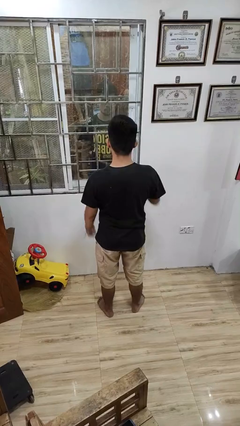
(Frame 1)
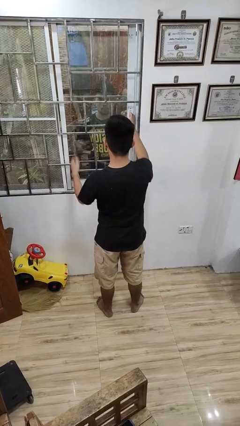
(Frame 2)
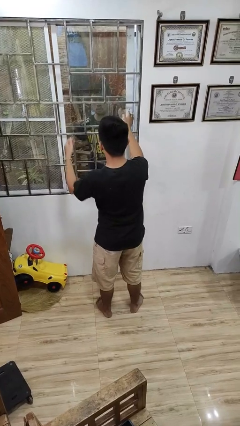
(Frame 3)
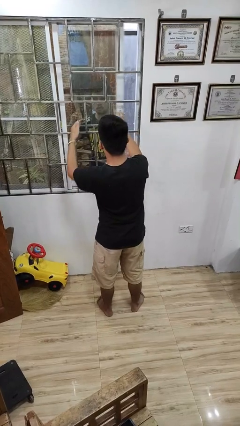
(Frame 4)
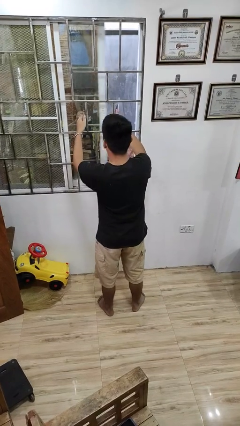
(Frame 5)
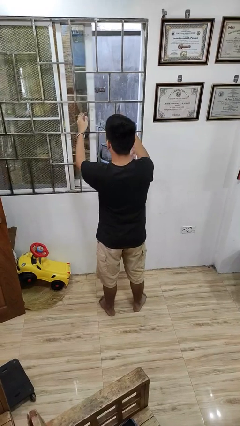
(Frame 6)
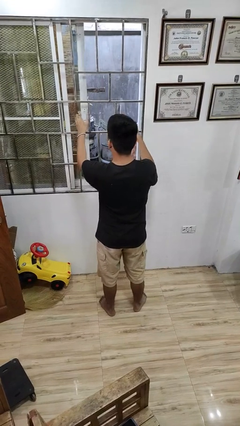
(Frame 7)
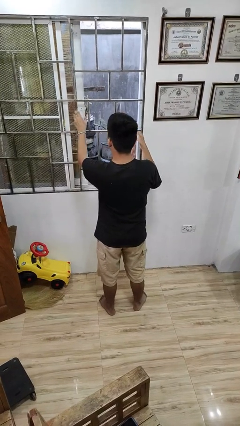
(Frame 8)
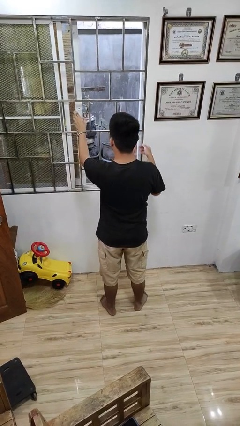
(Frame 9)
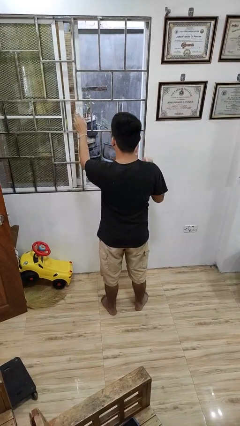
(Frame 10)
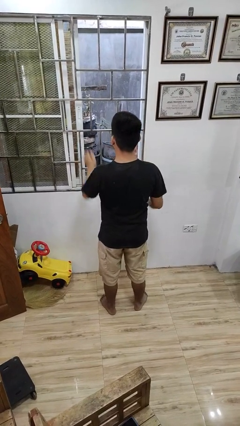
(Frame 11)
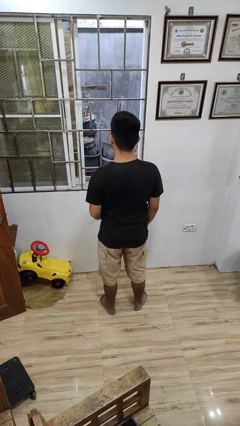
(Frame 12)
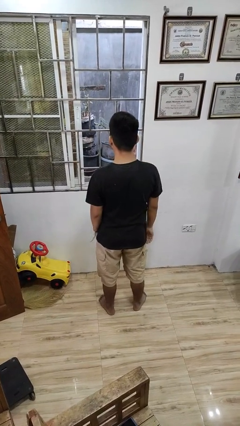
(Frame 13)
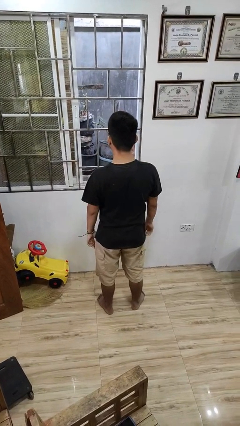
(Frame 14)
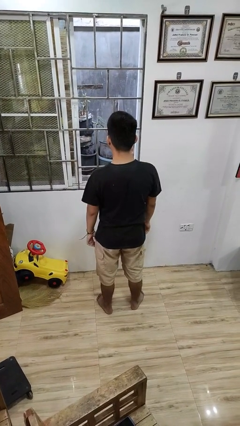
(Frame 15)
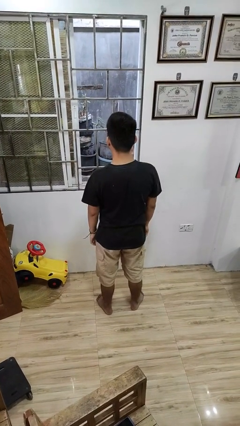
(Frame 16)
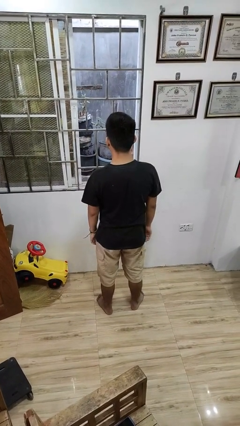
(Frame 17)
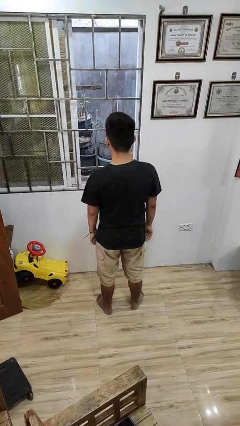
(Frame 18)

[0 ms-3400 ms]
person opens home window

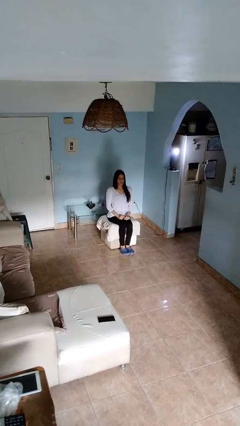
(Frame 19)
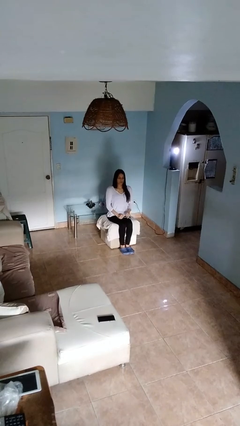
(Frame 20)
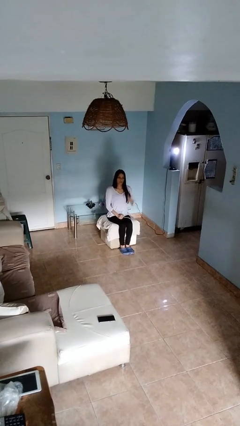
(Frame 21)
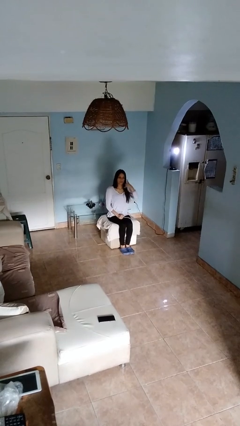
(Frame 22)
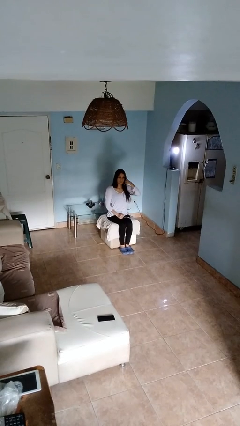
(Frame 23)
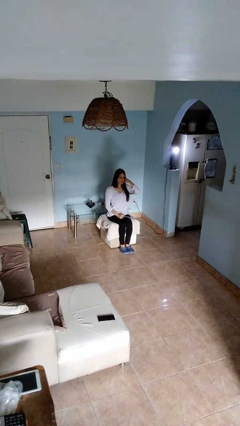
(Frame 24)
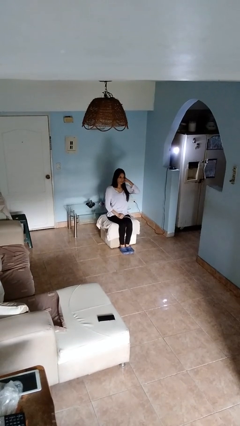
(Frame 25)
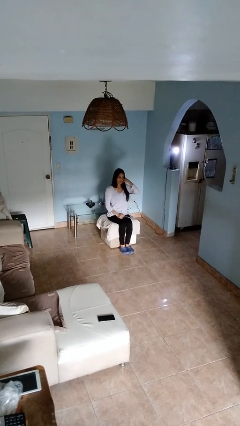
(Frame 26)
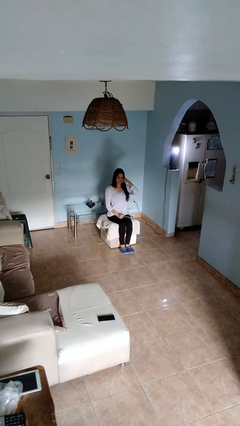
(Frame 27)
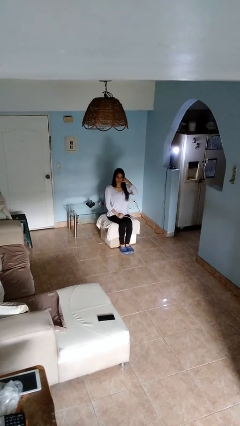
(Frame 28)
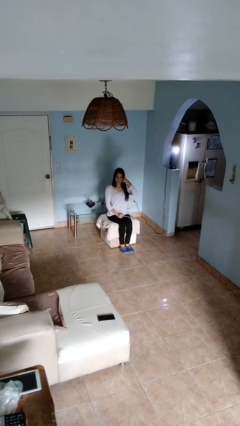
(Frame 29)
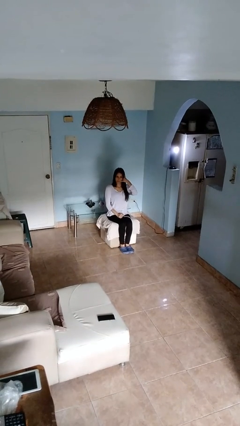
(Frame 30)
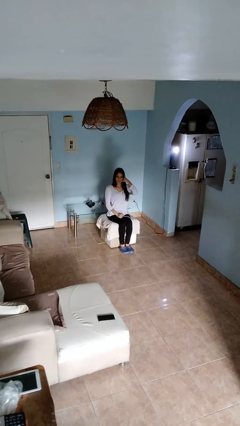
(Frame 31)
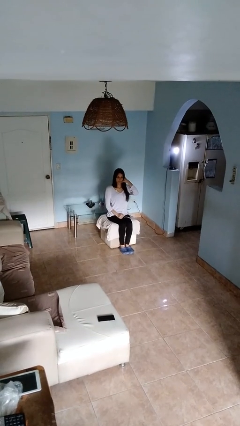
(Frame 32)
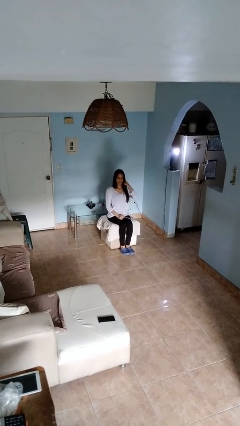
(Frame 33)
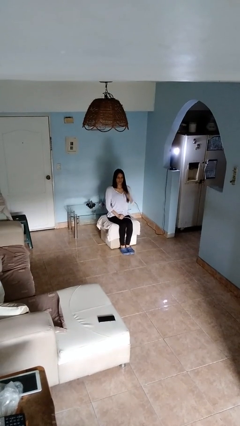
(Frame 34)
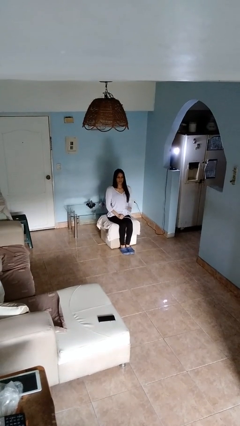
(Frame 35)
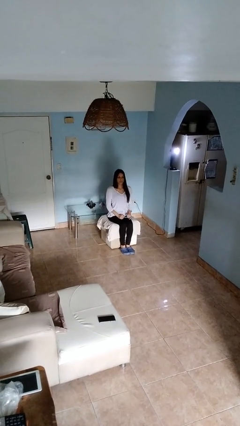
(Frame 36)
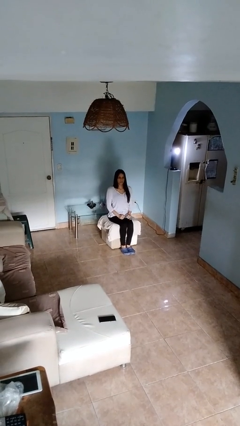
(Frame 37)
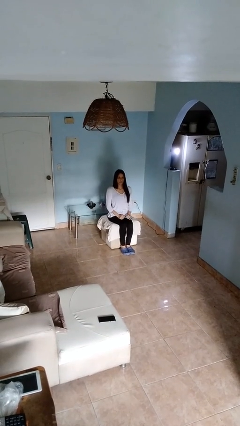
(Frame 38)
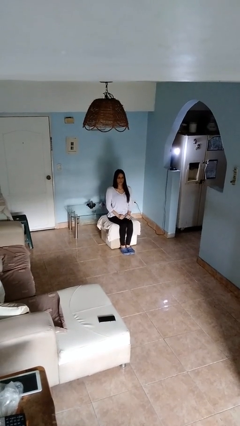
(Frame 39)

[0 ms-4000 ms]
person gestures call me

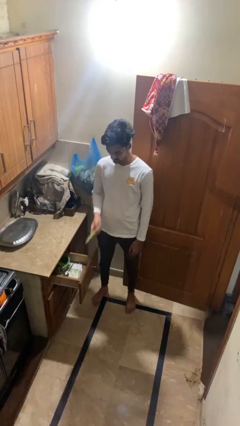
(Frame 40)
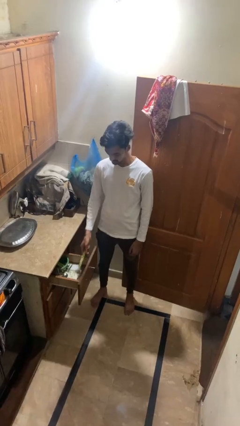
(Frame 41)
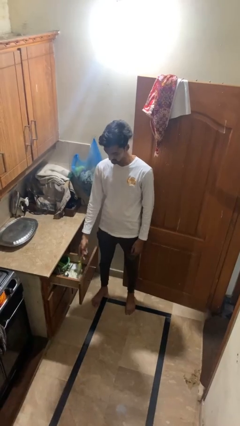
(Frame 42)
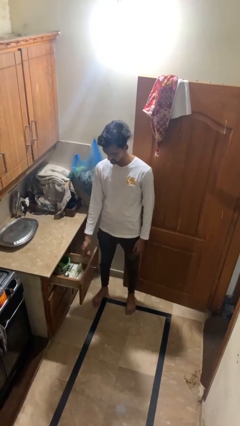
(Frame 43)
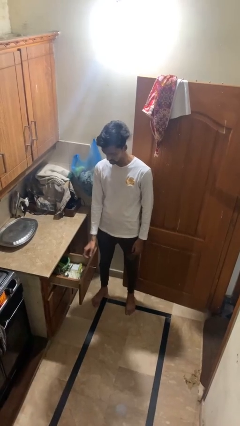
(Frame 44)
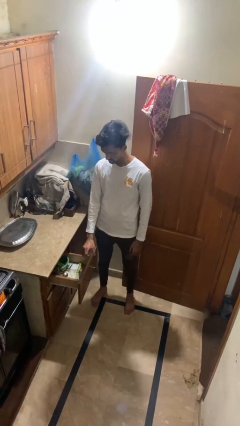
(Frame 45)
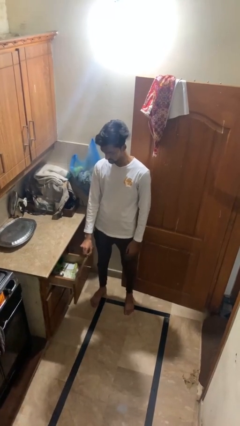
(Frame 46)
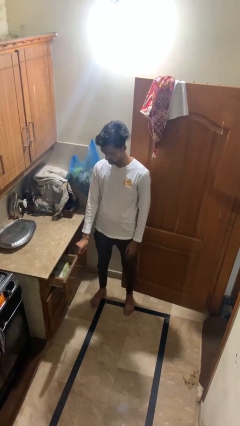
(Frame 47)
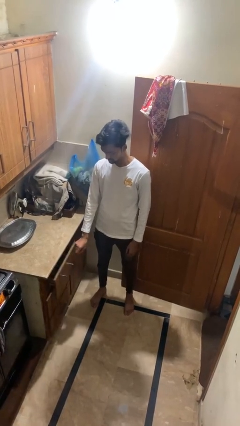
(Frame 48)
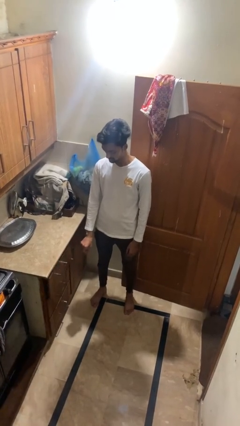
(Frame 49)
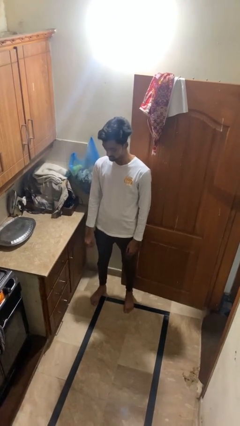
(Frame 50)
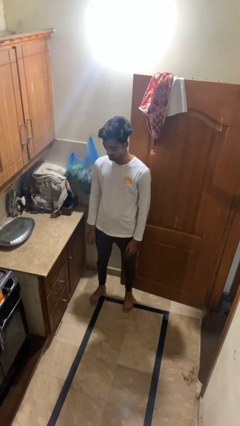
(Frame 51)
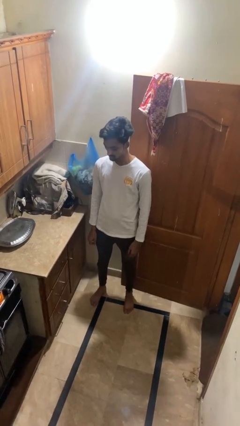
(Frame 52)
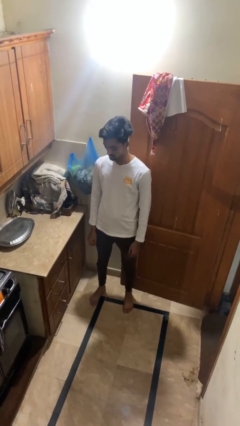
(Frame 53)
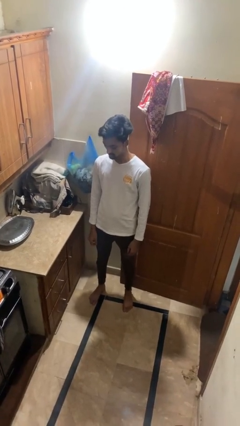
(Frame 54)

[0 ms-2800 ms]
person puts object into kitchen drawer

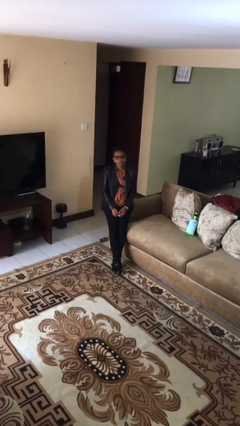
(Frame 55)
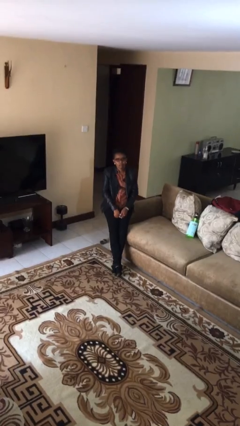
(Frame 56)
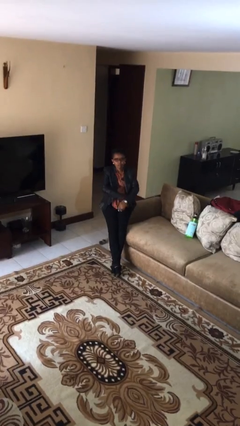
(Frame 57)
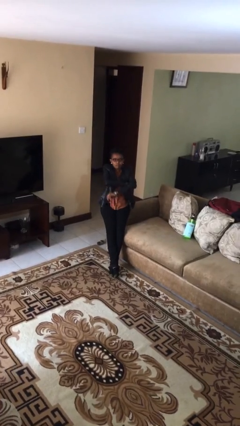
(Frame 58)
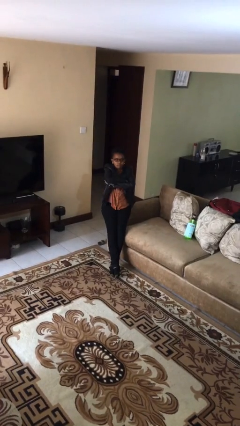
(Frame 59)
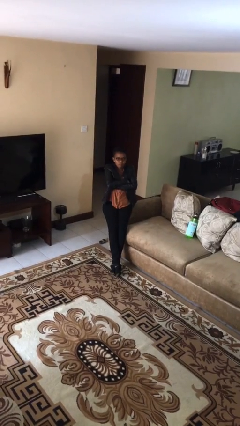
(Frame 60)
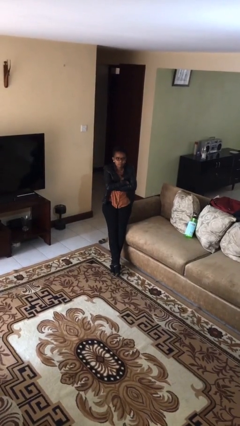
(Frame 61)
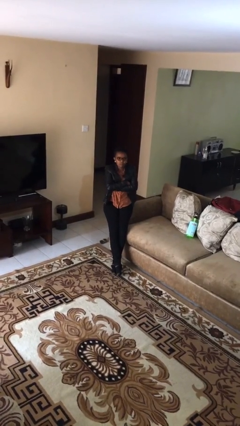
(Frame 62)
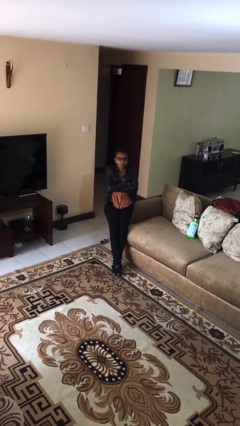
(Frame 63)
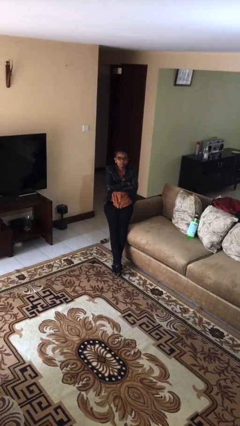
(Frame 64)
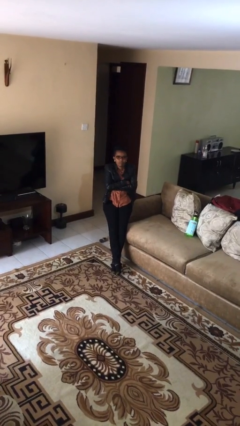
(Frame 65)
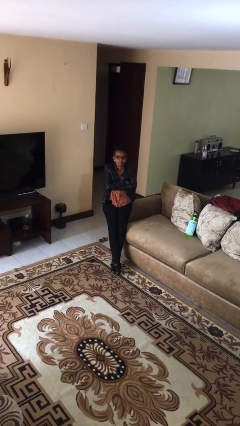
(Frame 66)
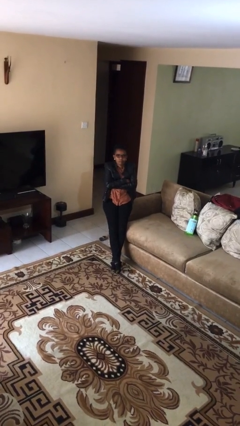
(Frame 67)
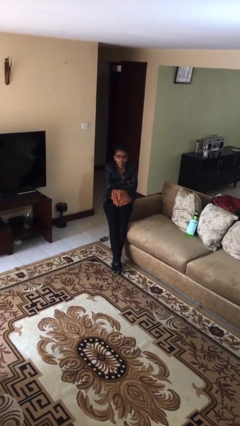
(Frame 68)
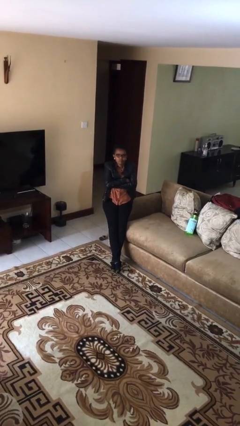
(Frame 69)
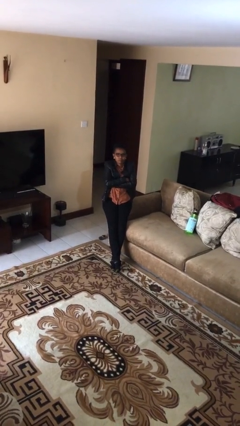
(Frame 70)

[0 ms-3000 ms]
person crosses arms

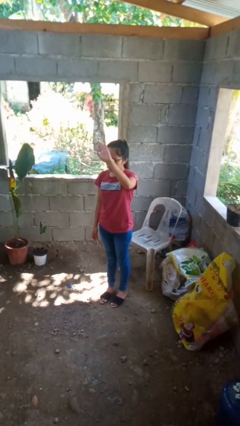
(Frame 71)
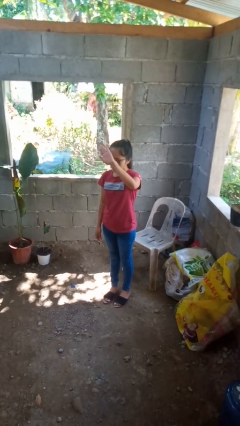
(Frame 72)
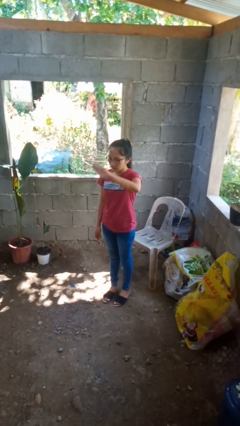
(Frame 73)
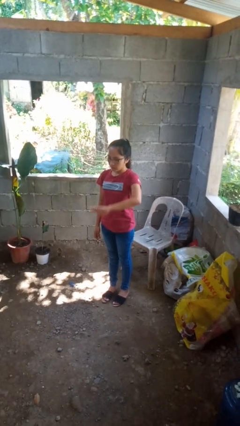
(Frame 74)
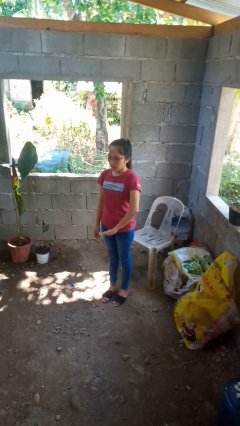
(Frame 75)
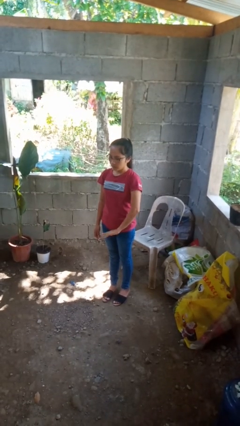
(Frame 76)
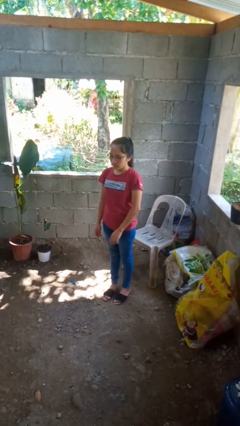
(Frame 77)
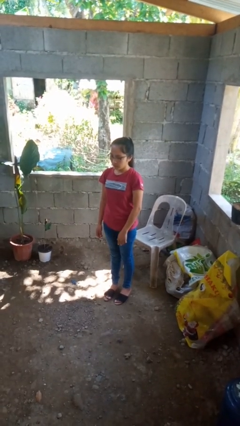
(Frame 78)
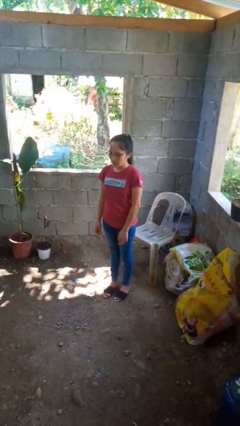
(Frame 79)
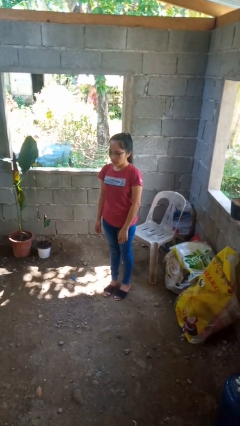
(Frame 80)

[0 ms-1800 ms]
person gestures swipe down

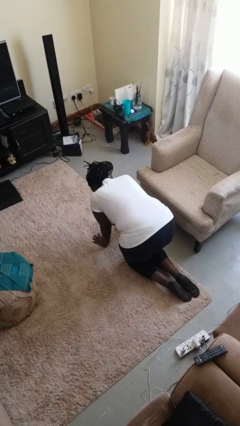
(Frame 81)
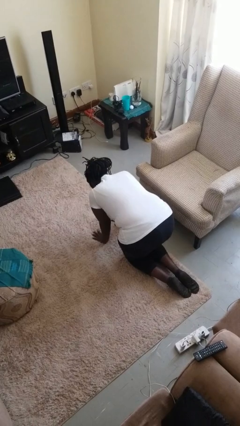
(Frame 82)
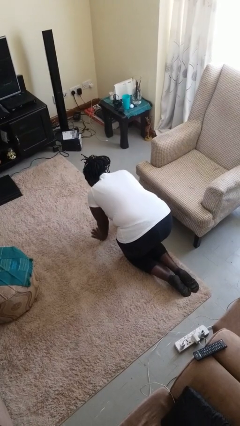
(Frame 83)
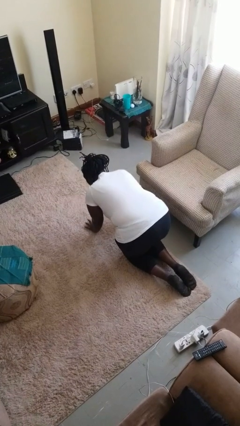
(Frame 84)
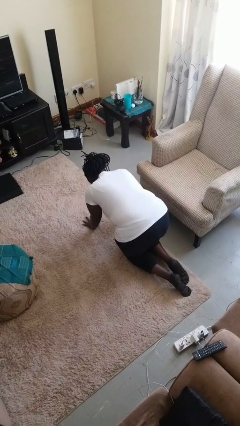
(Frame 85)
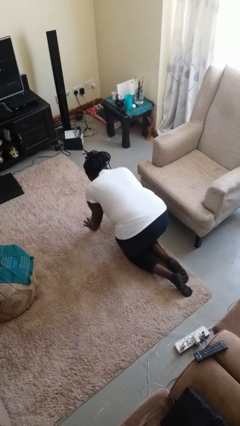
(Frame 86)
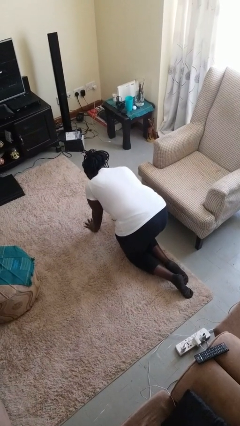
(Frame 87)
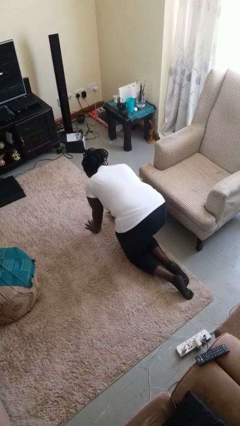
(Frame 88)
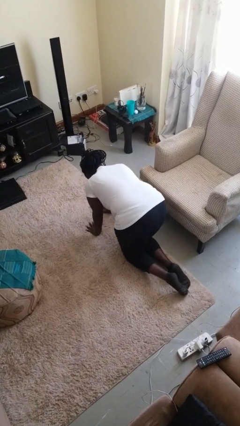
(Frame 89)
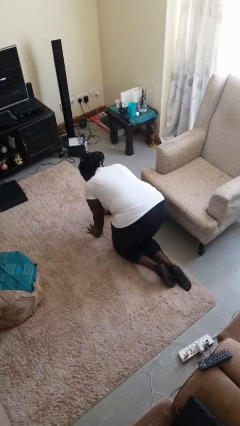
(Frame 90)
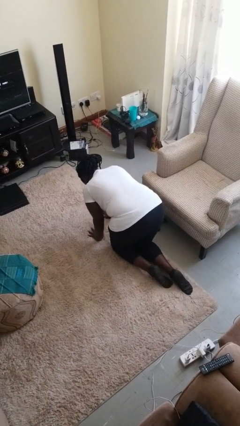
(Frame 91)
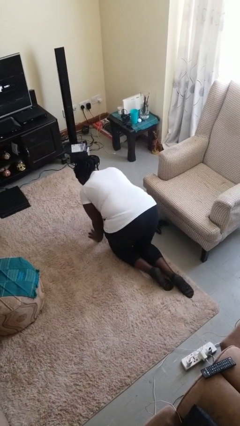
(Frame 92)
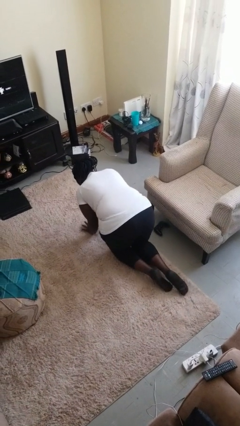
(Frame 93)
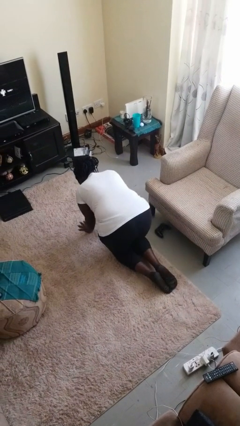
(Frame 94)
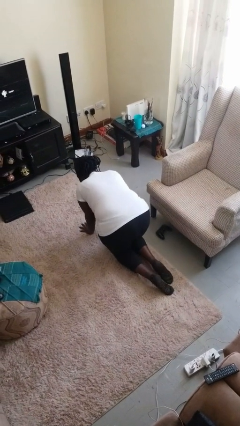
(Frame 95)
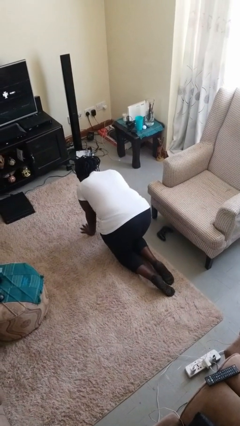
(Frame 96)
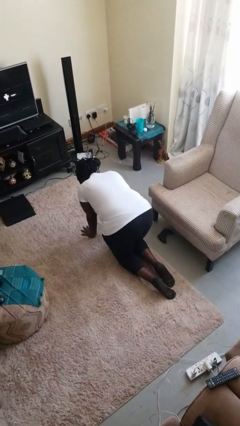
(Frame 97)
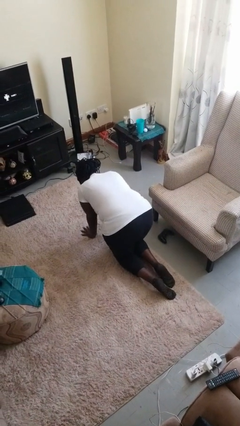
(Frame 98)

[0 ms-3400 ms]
person crawls
